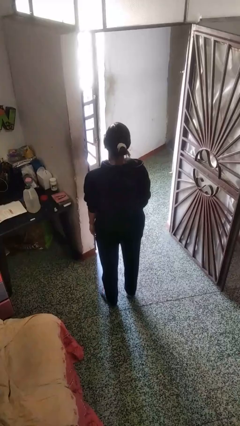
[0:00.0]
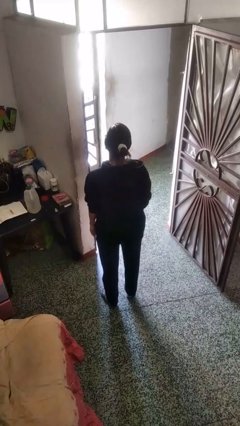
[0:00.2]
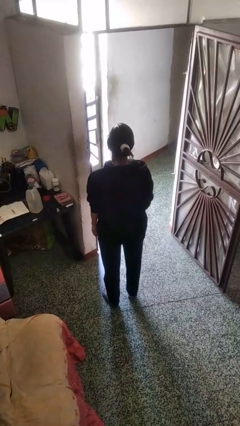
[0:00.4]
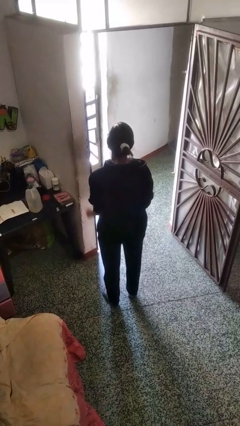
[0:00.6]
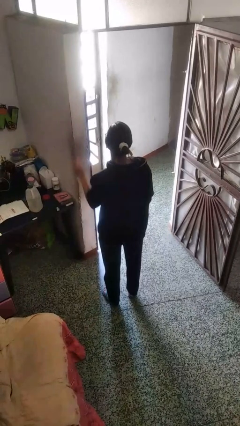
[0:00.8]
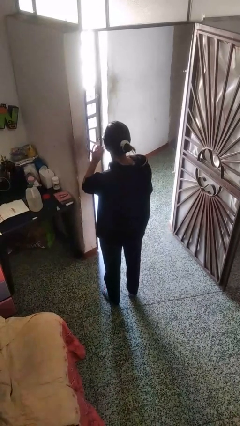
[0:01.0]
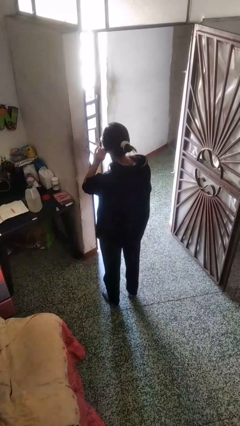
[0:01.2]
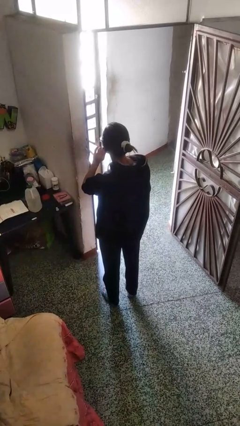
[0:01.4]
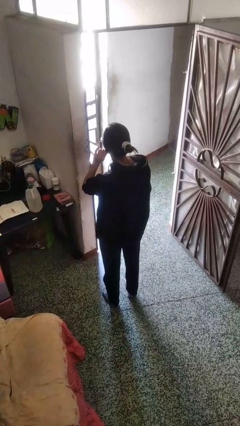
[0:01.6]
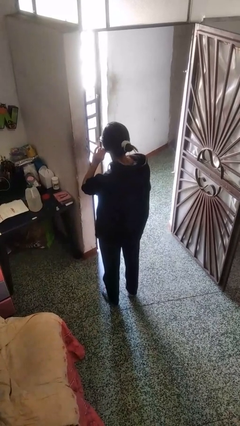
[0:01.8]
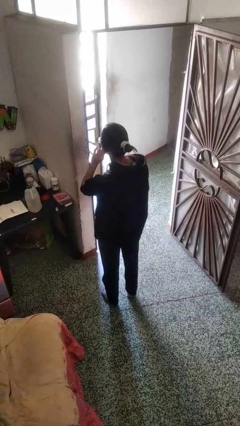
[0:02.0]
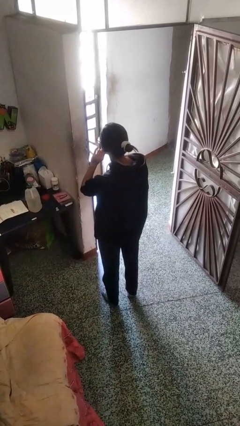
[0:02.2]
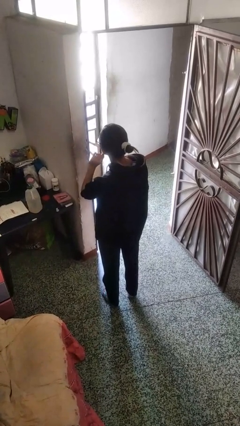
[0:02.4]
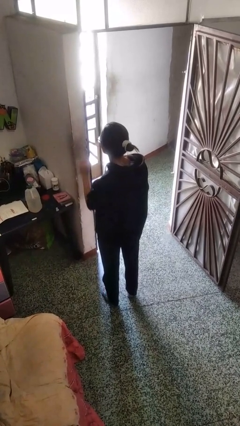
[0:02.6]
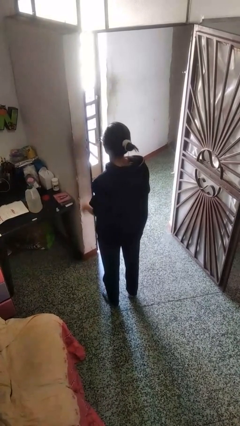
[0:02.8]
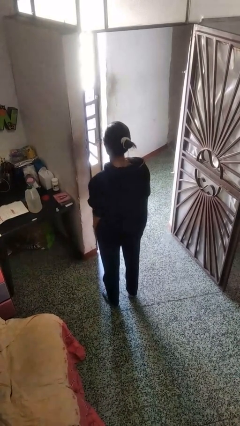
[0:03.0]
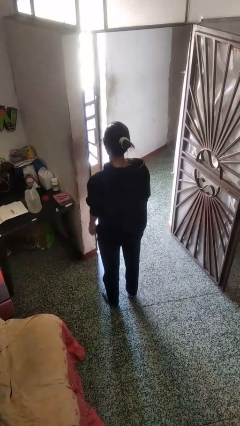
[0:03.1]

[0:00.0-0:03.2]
person touches earlobe

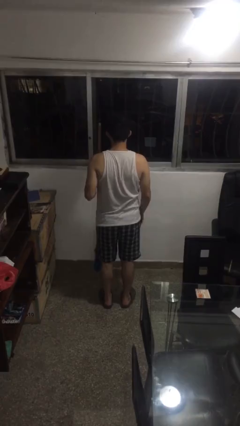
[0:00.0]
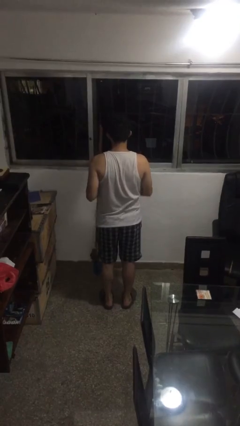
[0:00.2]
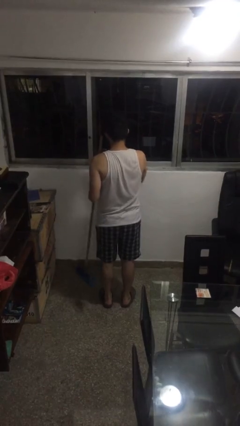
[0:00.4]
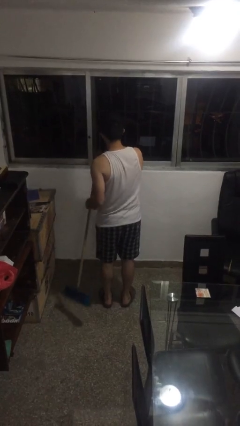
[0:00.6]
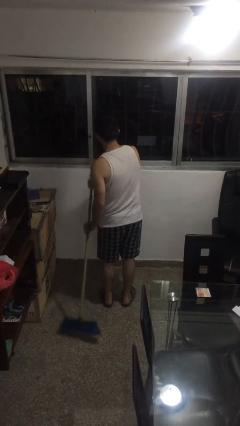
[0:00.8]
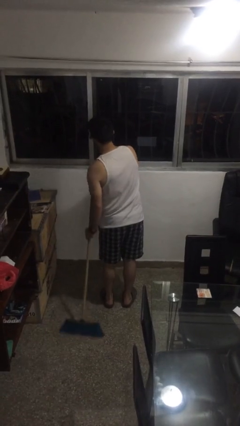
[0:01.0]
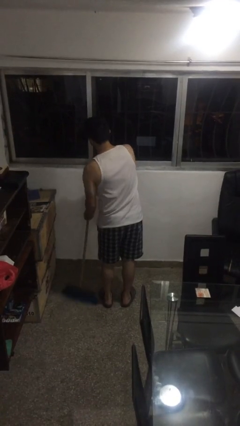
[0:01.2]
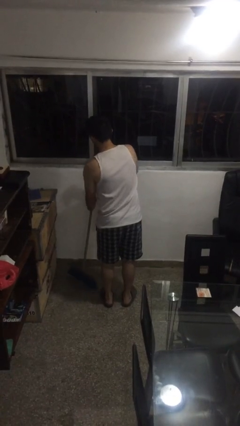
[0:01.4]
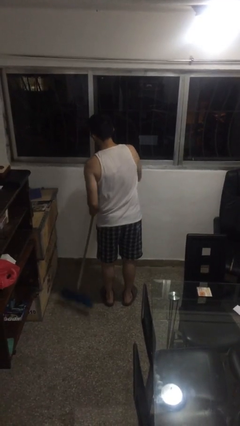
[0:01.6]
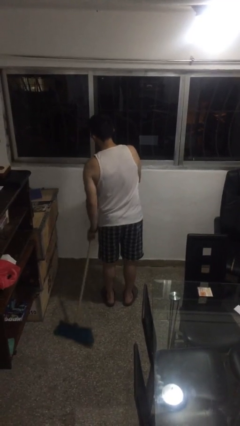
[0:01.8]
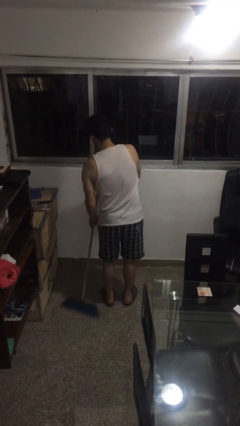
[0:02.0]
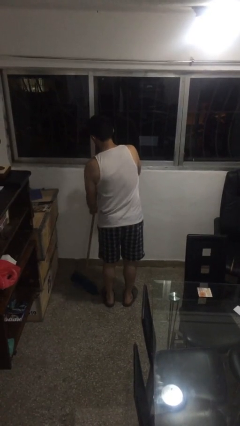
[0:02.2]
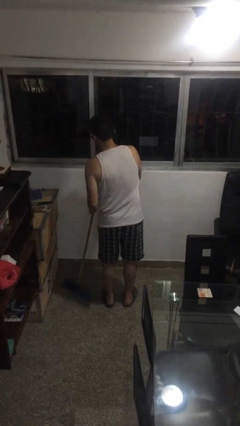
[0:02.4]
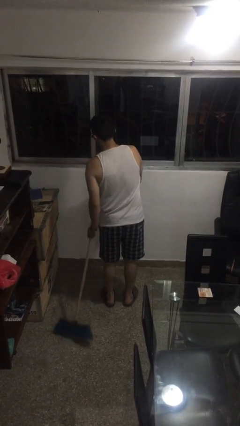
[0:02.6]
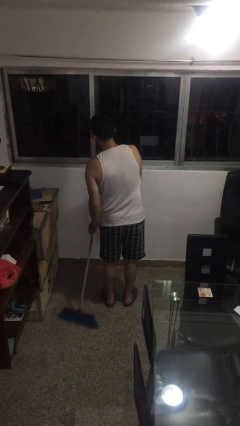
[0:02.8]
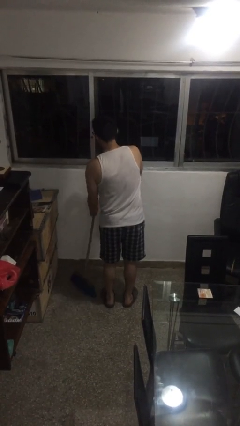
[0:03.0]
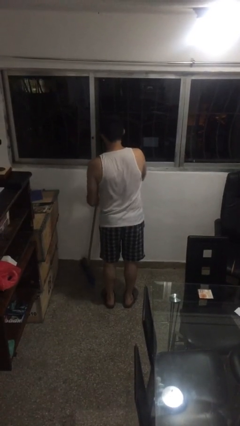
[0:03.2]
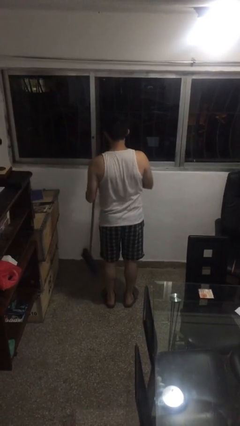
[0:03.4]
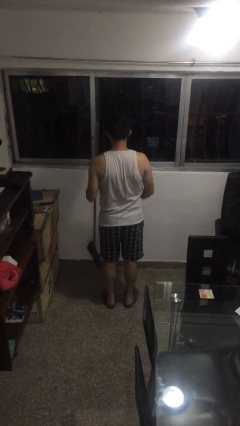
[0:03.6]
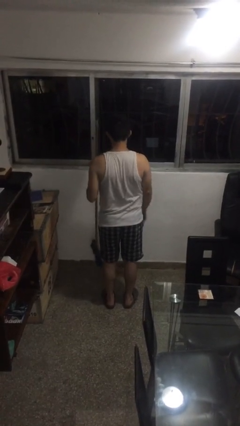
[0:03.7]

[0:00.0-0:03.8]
person sweeps floor

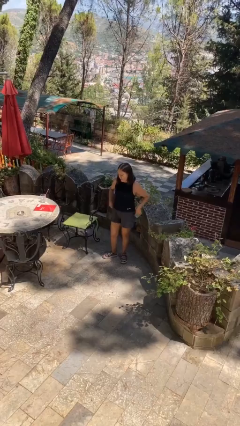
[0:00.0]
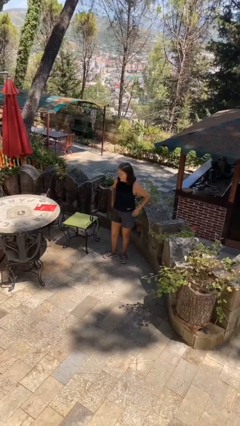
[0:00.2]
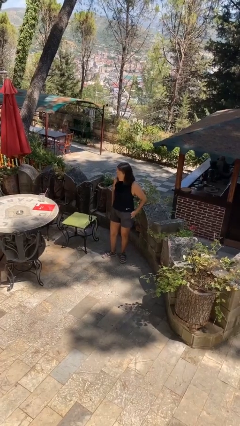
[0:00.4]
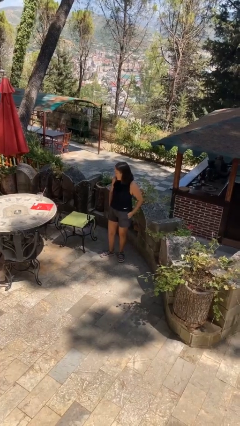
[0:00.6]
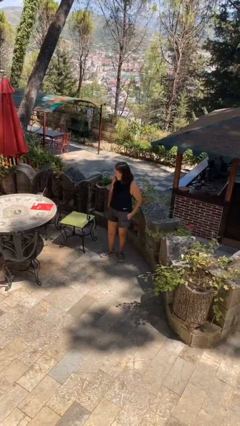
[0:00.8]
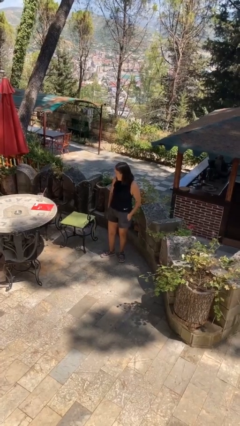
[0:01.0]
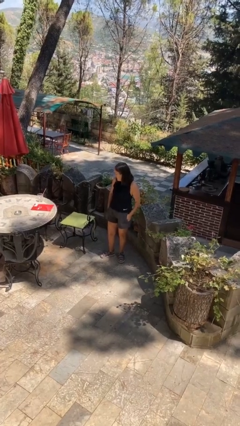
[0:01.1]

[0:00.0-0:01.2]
person puts phone into pocket

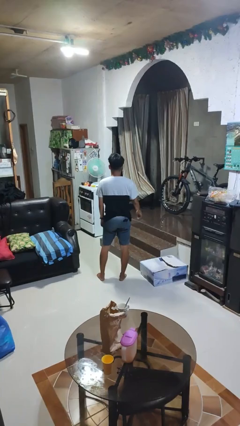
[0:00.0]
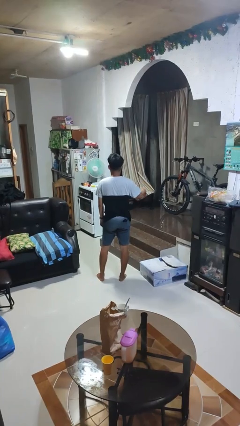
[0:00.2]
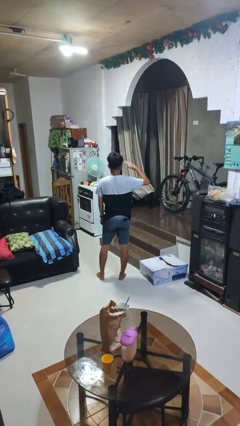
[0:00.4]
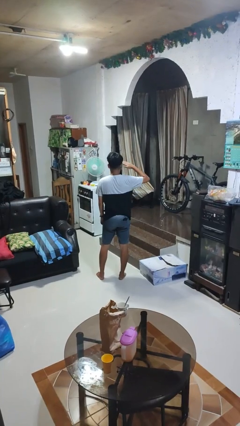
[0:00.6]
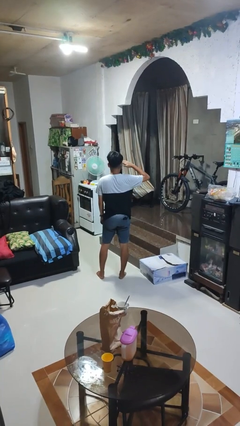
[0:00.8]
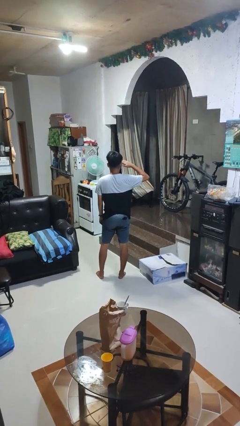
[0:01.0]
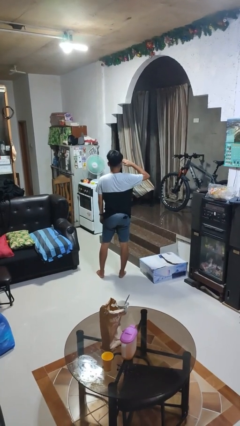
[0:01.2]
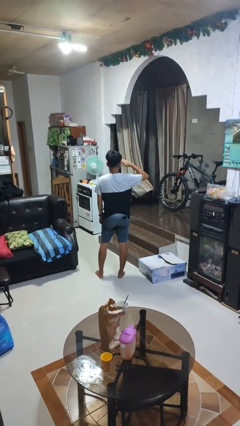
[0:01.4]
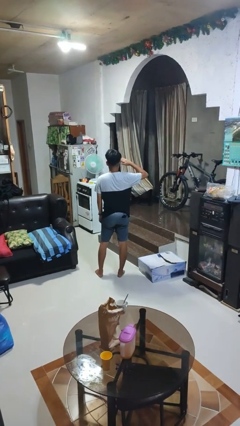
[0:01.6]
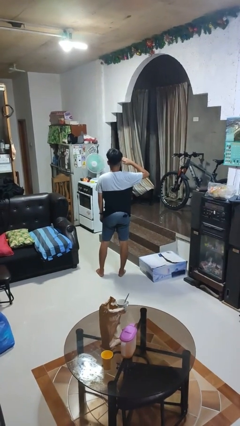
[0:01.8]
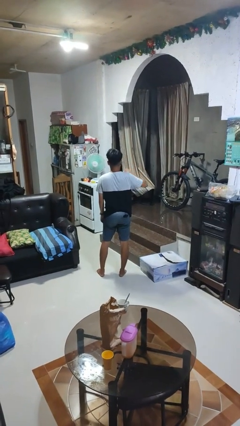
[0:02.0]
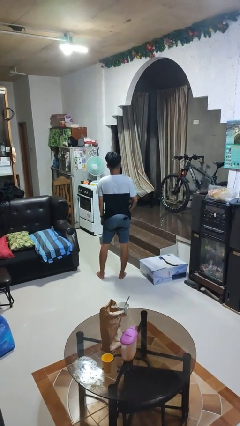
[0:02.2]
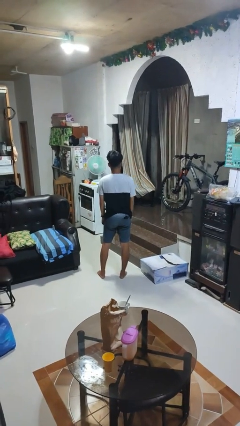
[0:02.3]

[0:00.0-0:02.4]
person salutes

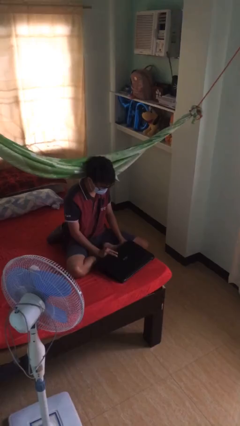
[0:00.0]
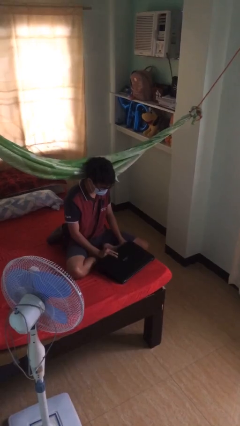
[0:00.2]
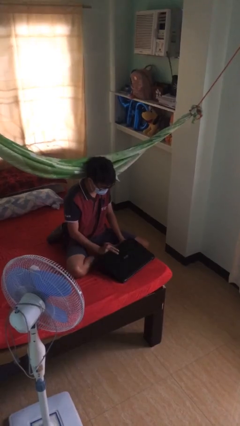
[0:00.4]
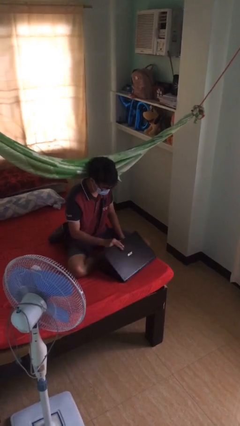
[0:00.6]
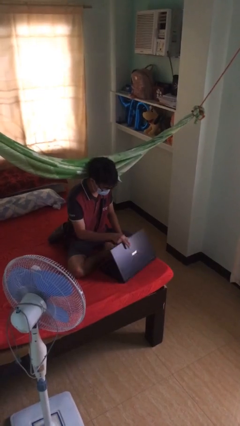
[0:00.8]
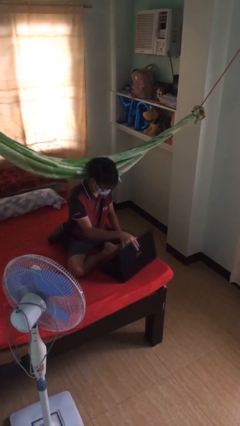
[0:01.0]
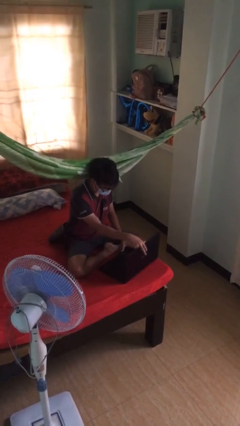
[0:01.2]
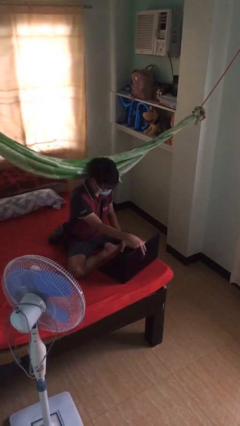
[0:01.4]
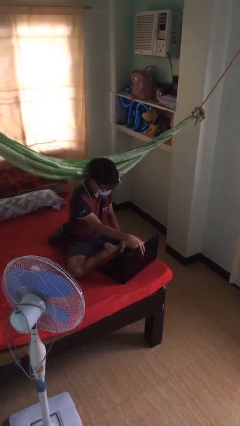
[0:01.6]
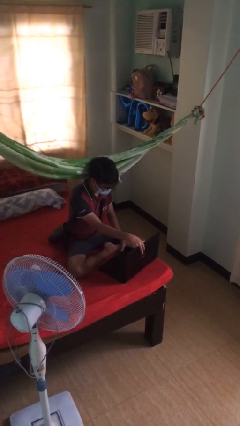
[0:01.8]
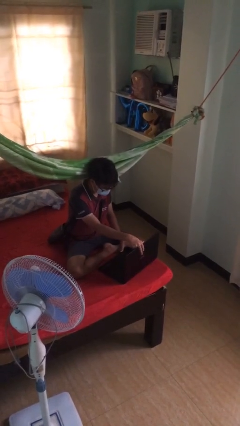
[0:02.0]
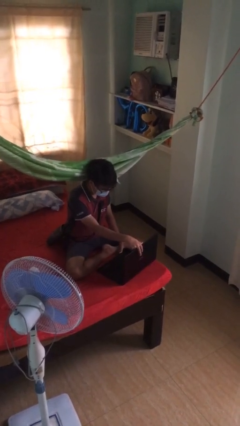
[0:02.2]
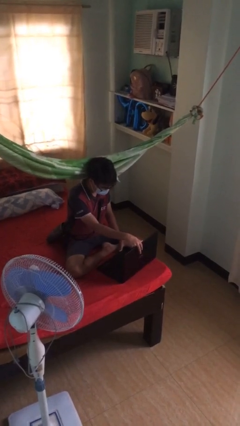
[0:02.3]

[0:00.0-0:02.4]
person interacts with laptop

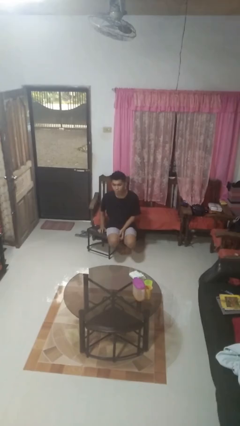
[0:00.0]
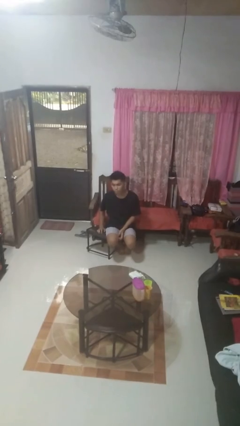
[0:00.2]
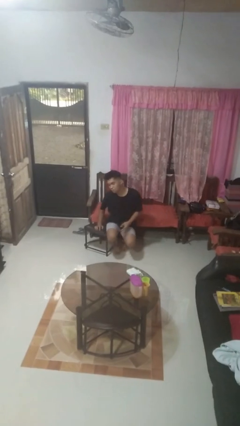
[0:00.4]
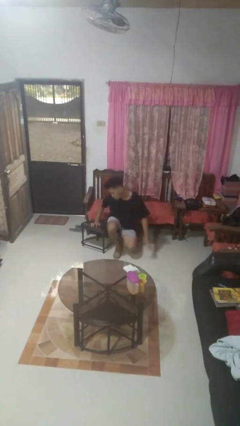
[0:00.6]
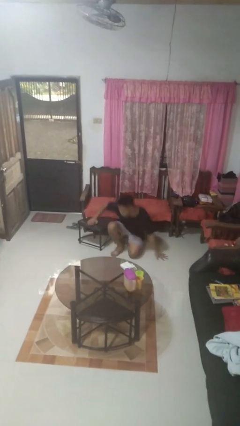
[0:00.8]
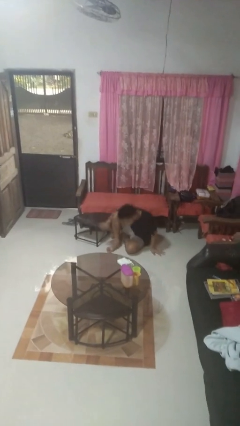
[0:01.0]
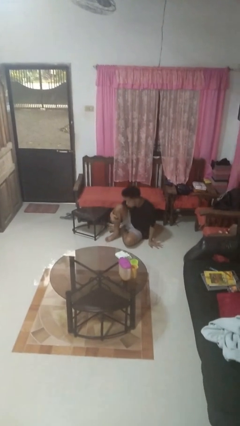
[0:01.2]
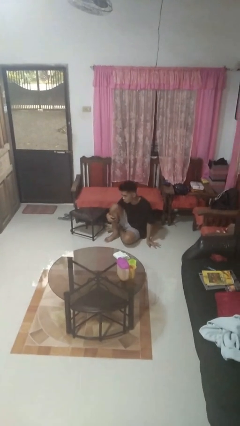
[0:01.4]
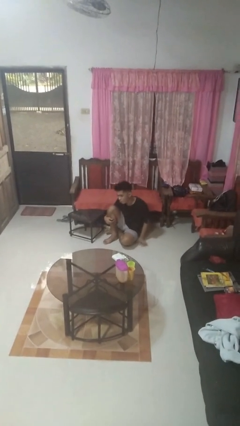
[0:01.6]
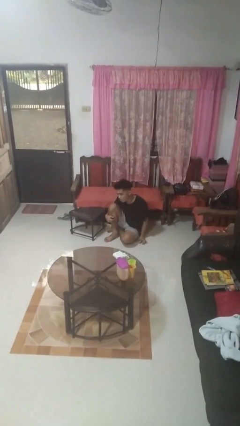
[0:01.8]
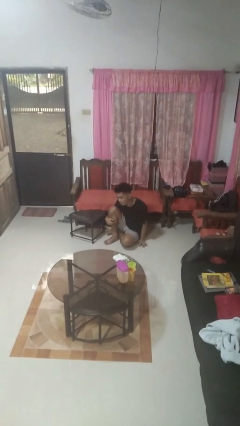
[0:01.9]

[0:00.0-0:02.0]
person falls from chair

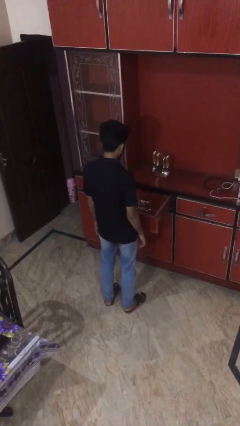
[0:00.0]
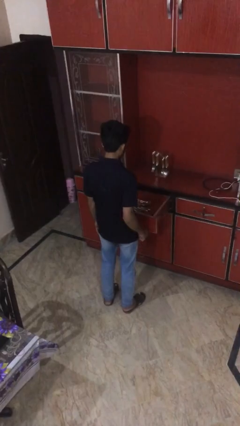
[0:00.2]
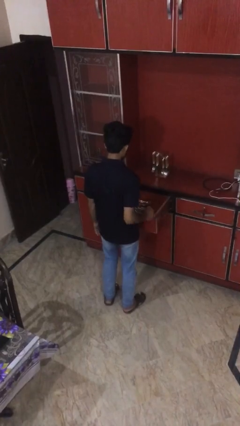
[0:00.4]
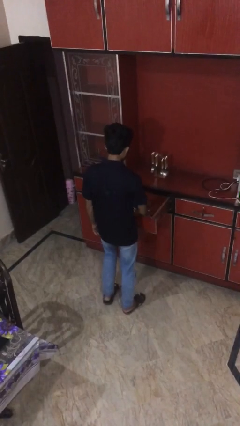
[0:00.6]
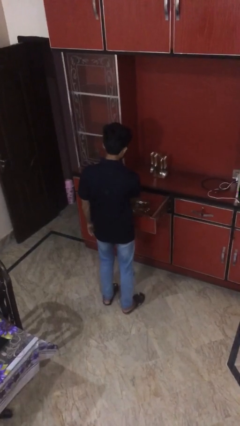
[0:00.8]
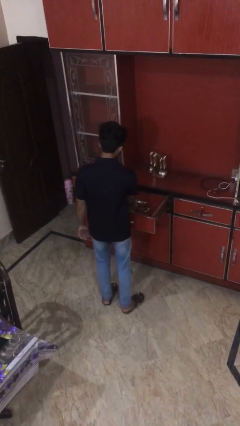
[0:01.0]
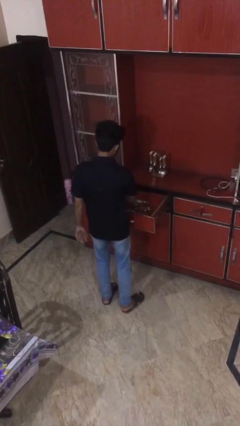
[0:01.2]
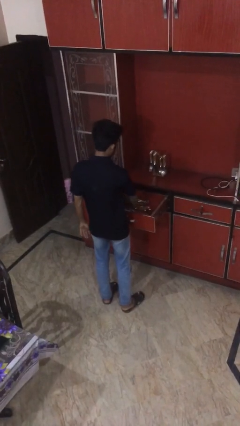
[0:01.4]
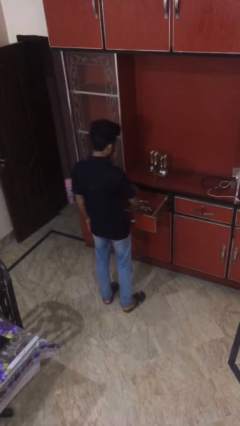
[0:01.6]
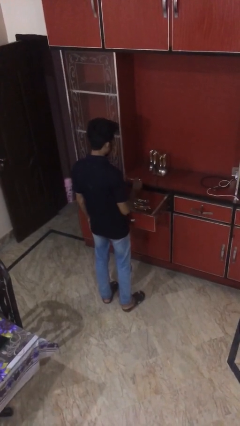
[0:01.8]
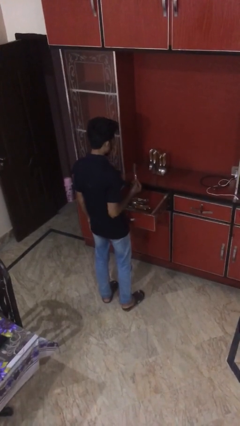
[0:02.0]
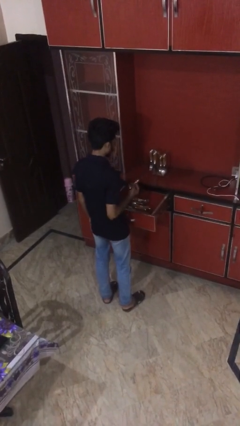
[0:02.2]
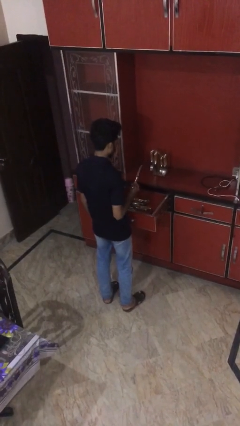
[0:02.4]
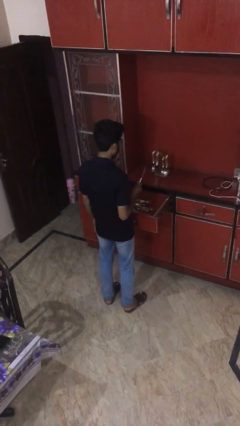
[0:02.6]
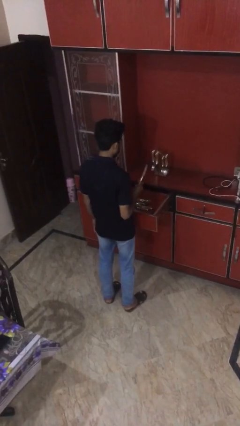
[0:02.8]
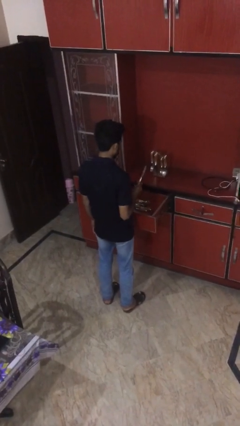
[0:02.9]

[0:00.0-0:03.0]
person takes object from kitchen drawer
